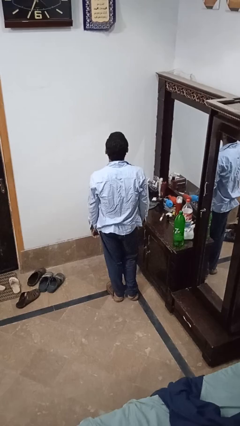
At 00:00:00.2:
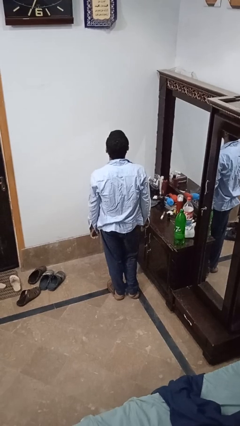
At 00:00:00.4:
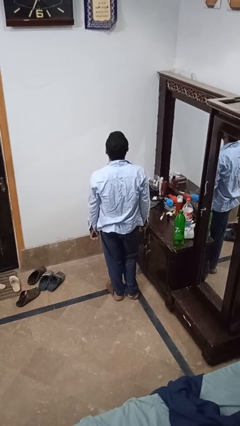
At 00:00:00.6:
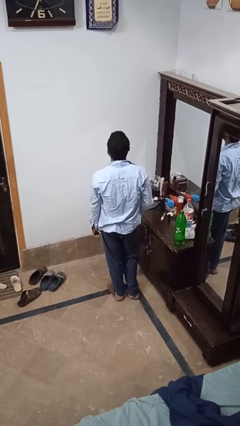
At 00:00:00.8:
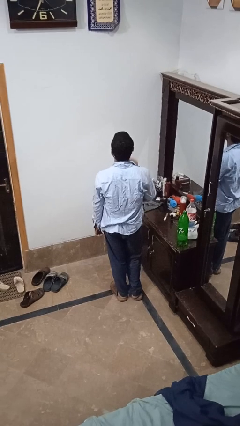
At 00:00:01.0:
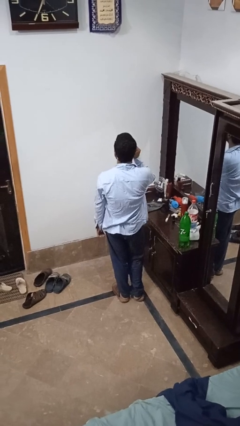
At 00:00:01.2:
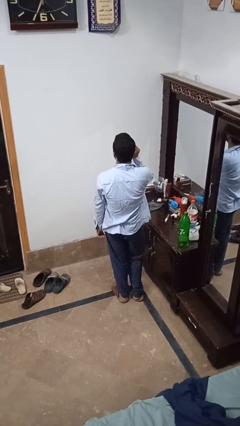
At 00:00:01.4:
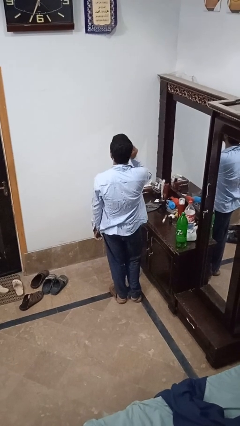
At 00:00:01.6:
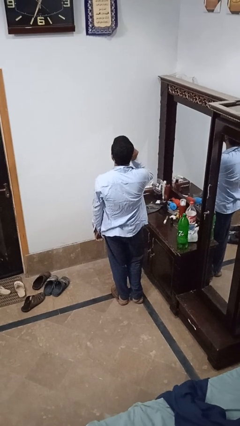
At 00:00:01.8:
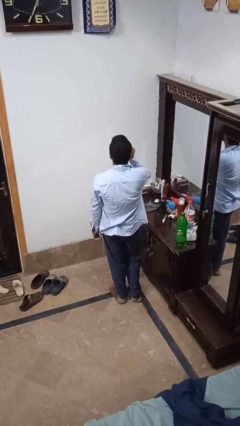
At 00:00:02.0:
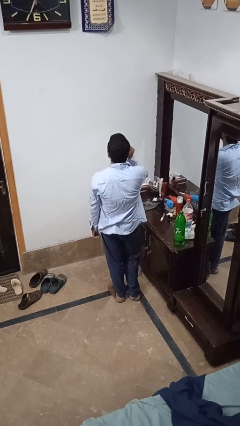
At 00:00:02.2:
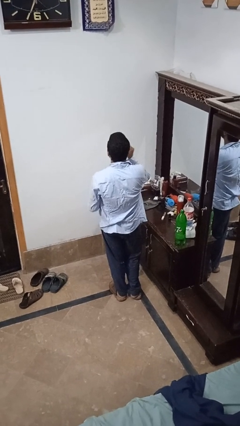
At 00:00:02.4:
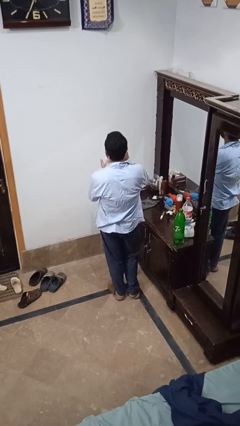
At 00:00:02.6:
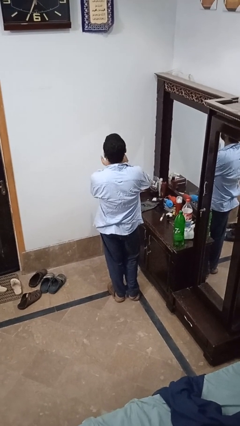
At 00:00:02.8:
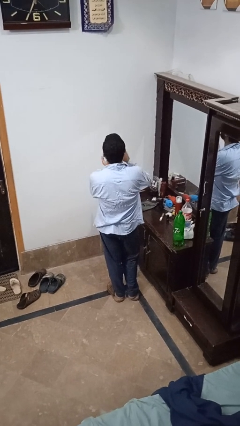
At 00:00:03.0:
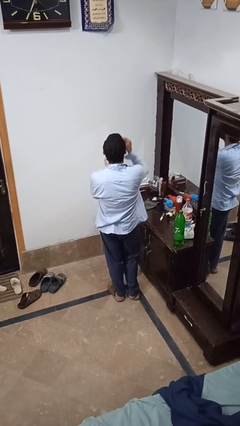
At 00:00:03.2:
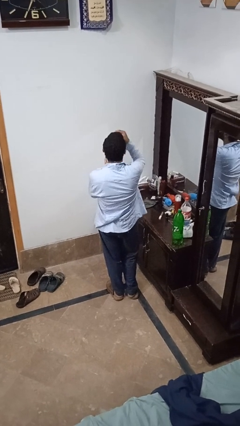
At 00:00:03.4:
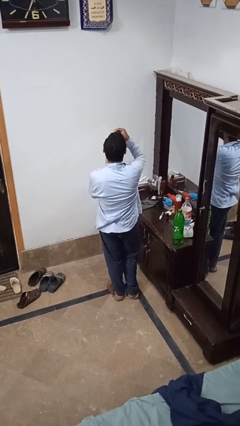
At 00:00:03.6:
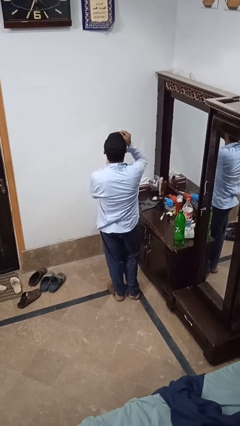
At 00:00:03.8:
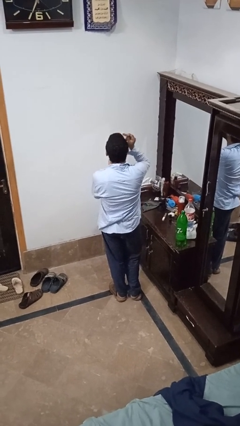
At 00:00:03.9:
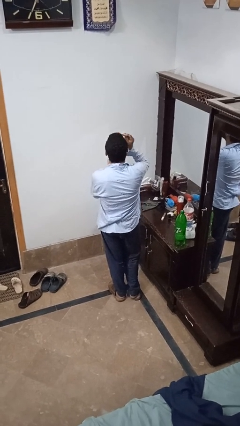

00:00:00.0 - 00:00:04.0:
person applies foundation makeup

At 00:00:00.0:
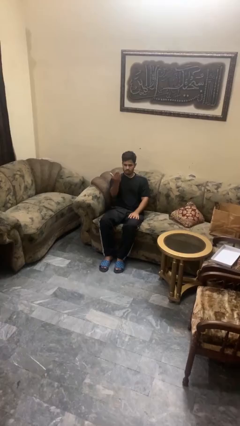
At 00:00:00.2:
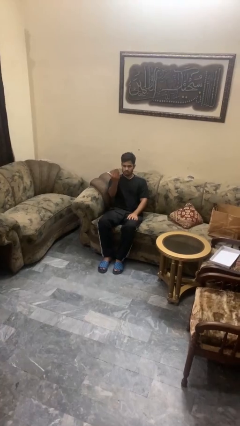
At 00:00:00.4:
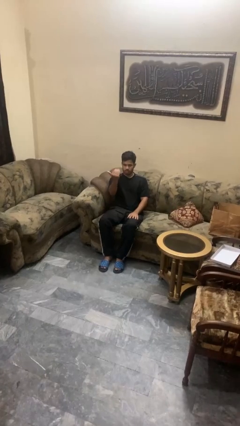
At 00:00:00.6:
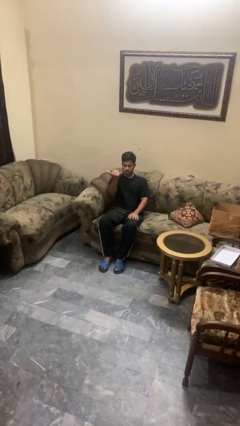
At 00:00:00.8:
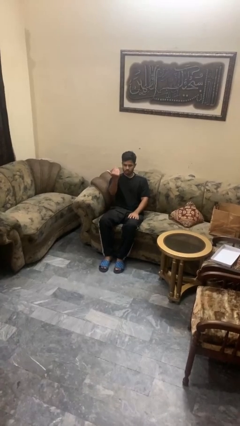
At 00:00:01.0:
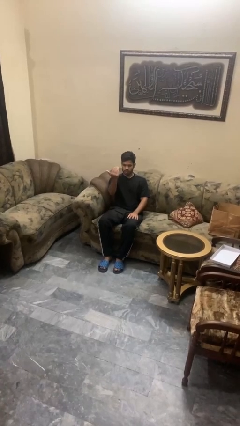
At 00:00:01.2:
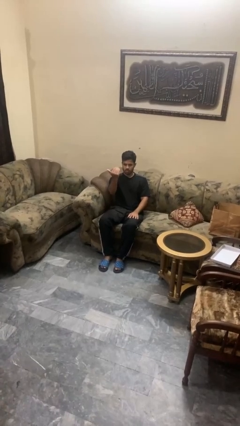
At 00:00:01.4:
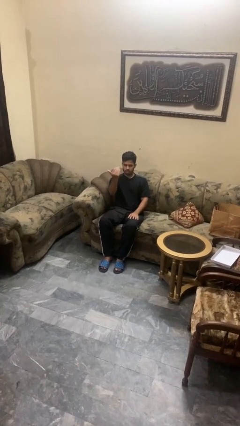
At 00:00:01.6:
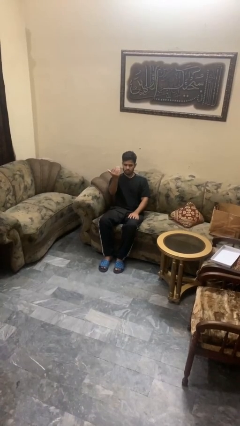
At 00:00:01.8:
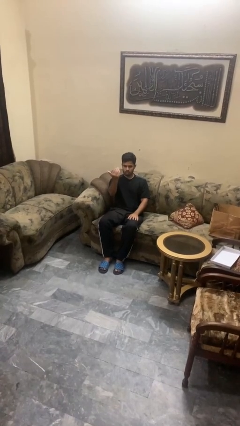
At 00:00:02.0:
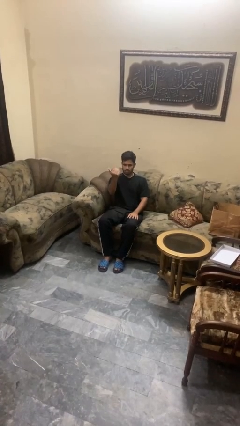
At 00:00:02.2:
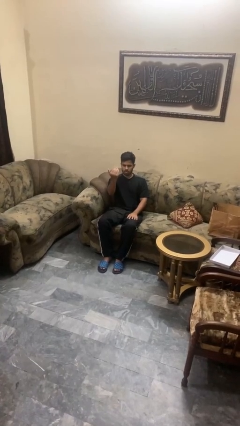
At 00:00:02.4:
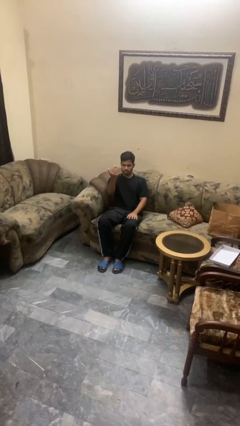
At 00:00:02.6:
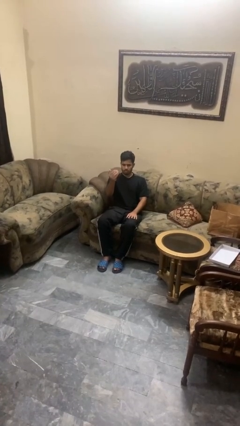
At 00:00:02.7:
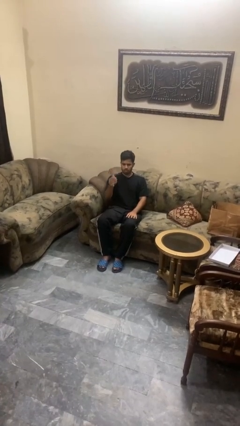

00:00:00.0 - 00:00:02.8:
person gestures come here

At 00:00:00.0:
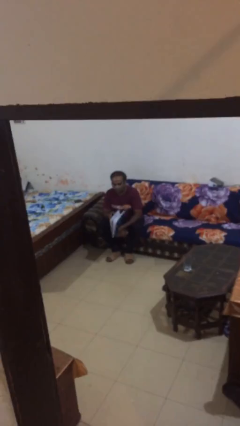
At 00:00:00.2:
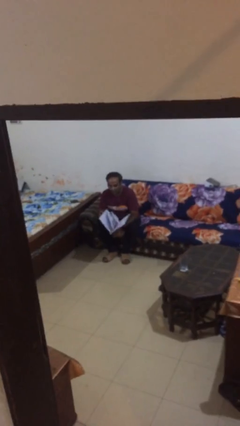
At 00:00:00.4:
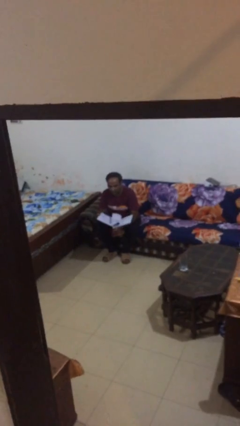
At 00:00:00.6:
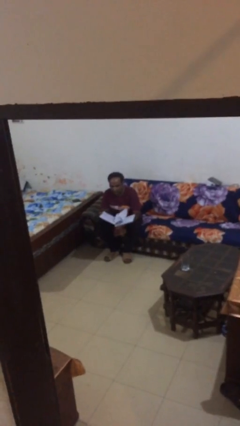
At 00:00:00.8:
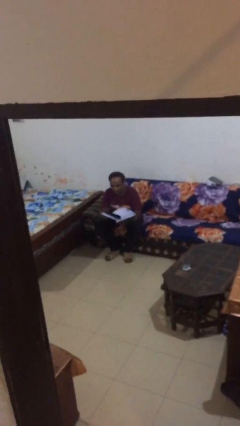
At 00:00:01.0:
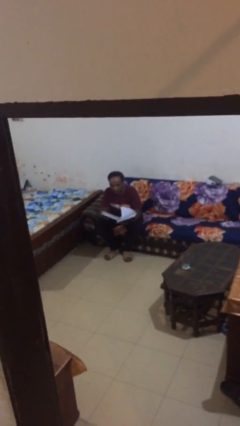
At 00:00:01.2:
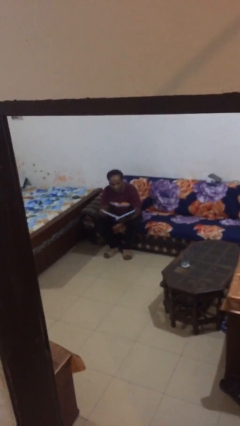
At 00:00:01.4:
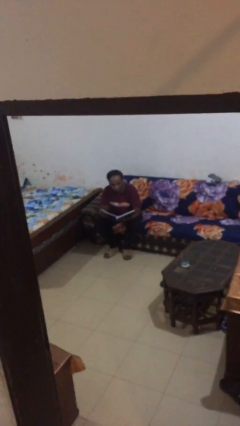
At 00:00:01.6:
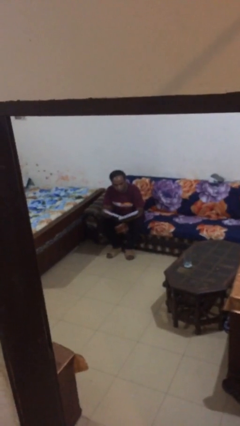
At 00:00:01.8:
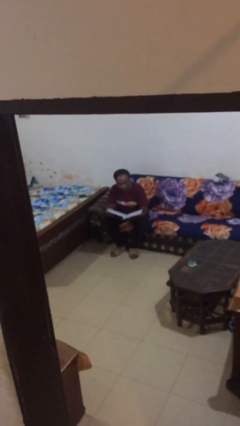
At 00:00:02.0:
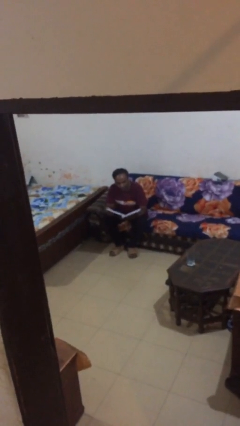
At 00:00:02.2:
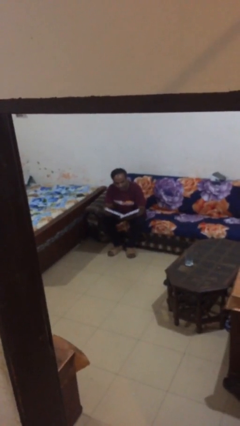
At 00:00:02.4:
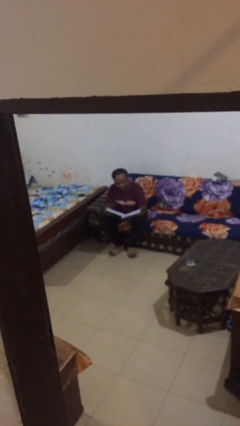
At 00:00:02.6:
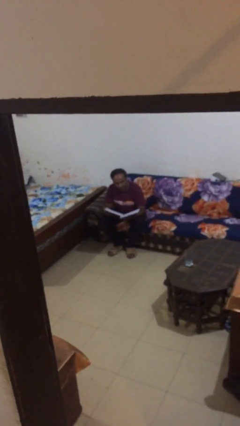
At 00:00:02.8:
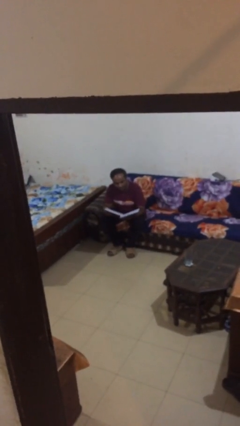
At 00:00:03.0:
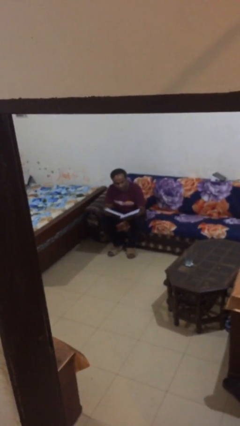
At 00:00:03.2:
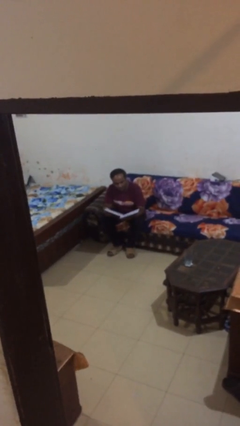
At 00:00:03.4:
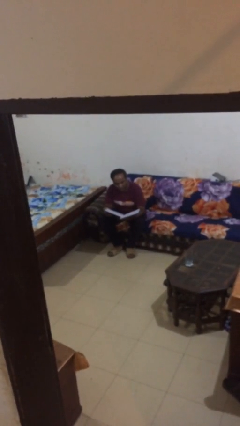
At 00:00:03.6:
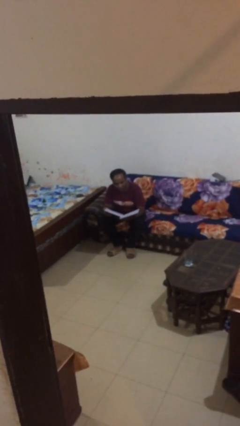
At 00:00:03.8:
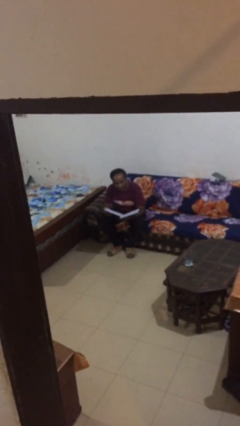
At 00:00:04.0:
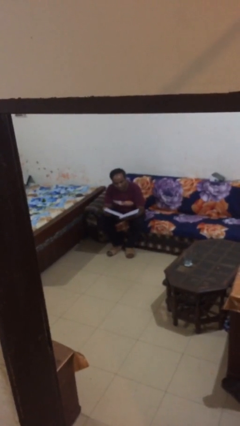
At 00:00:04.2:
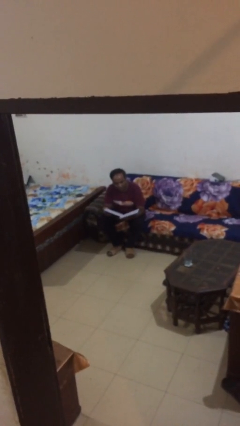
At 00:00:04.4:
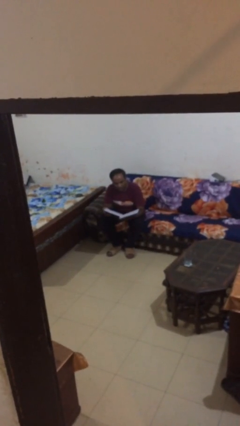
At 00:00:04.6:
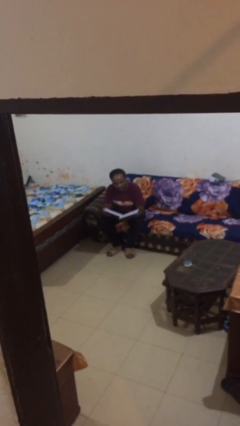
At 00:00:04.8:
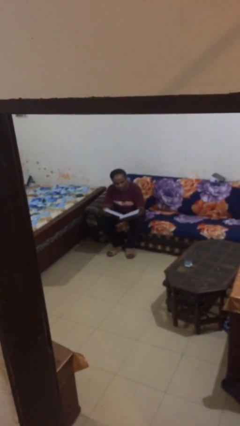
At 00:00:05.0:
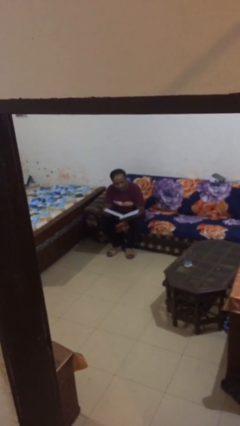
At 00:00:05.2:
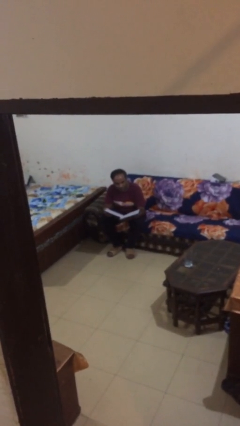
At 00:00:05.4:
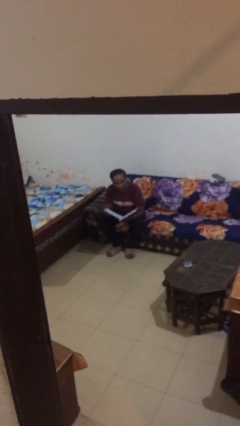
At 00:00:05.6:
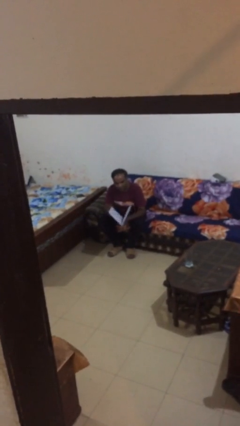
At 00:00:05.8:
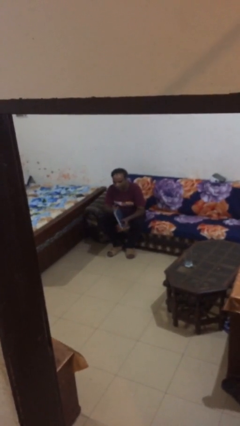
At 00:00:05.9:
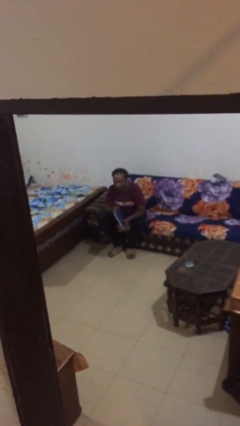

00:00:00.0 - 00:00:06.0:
person reads document

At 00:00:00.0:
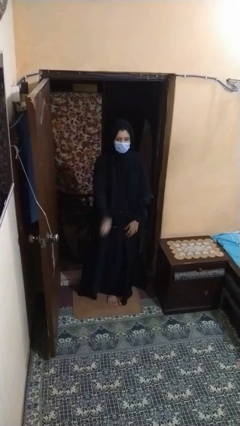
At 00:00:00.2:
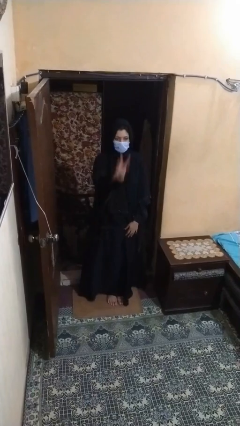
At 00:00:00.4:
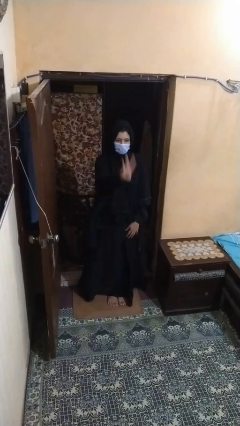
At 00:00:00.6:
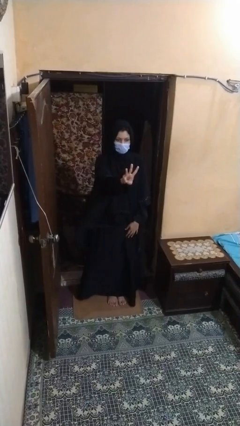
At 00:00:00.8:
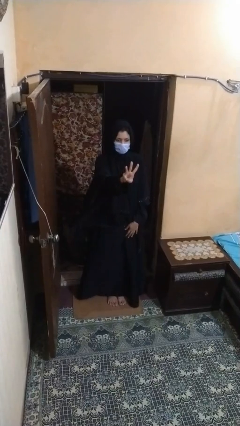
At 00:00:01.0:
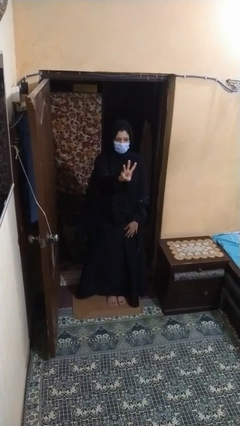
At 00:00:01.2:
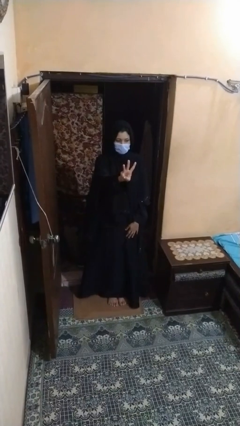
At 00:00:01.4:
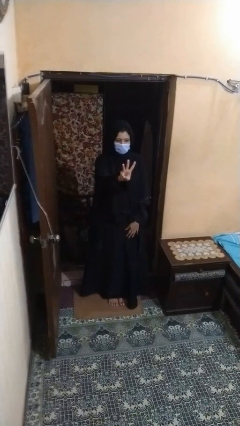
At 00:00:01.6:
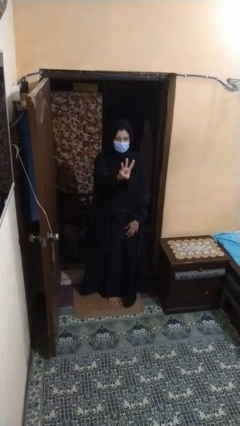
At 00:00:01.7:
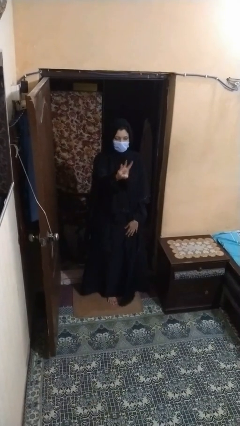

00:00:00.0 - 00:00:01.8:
person gestures number three

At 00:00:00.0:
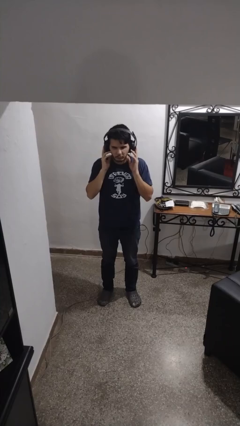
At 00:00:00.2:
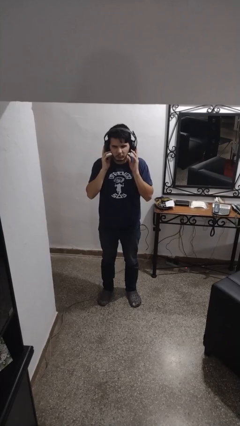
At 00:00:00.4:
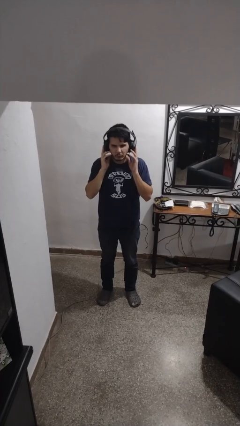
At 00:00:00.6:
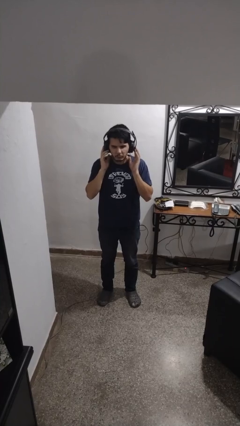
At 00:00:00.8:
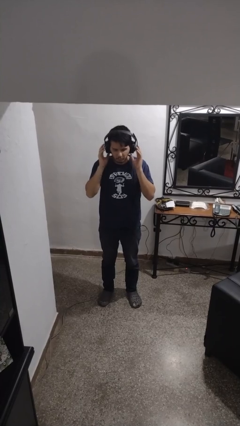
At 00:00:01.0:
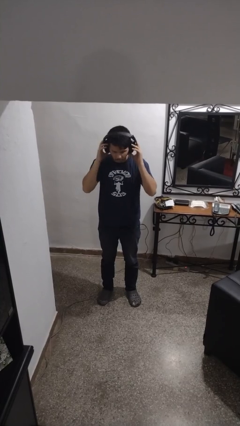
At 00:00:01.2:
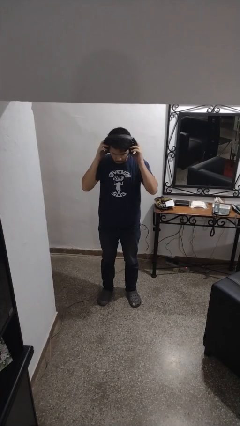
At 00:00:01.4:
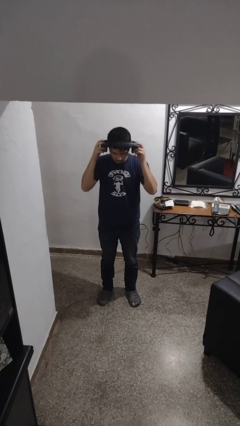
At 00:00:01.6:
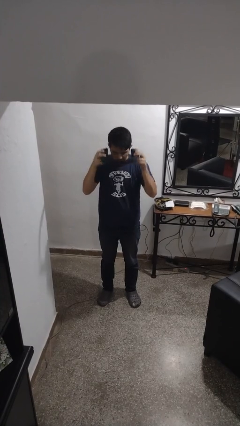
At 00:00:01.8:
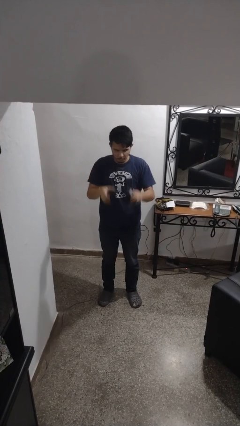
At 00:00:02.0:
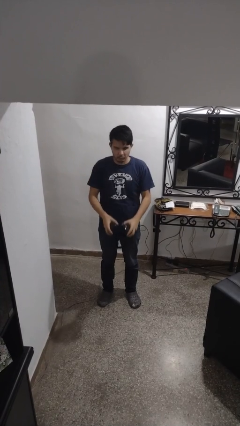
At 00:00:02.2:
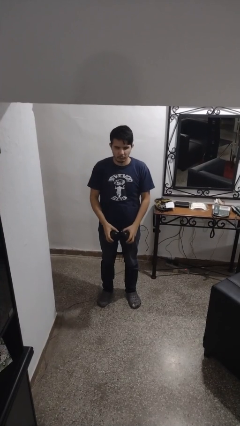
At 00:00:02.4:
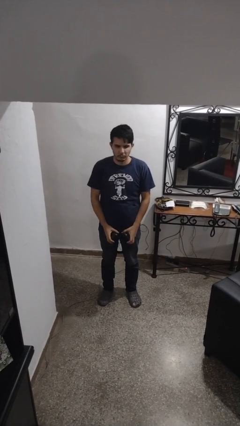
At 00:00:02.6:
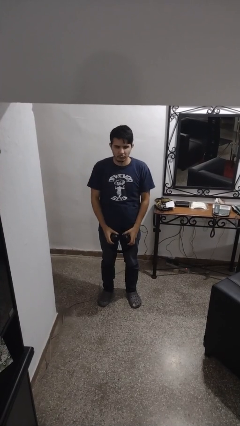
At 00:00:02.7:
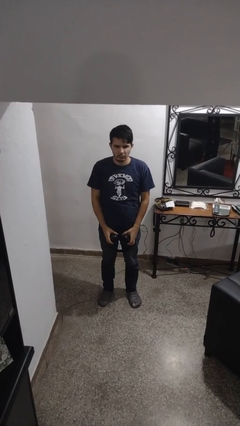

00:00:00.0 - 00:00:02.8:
person takes off headphones
